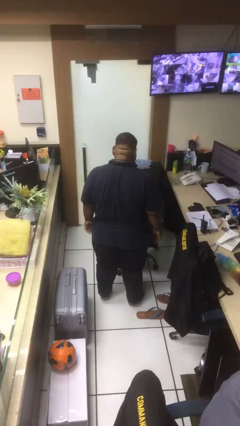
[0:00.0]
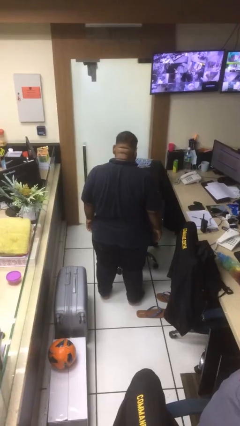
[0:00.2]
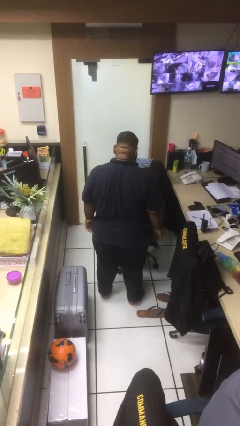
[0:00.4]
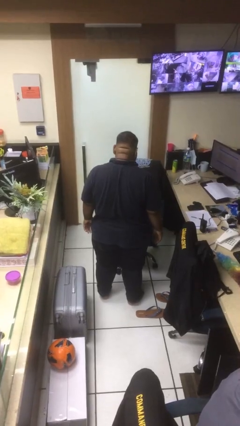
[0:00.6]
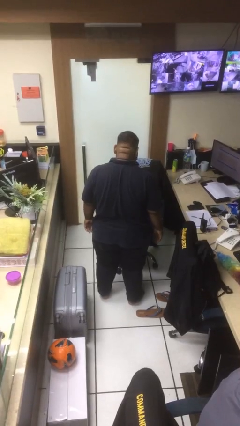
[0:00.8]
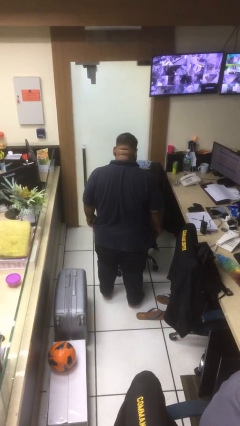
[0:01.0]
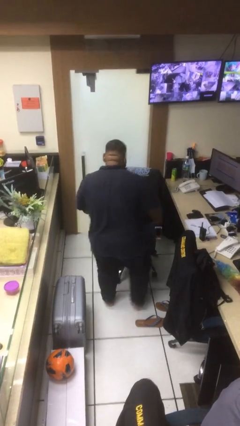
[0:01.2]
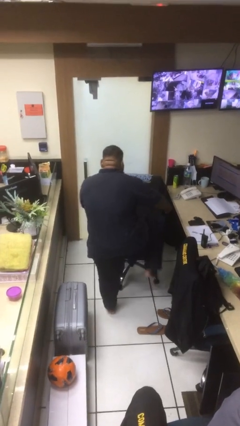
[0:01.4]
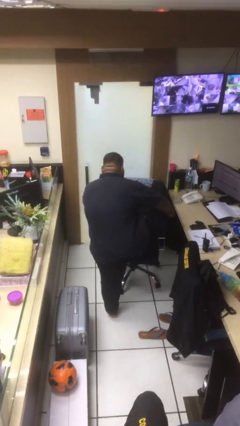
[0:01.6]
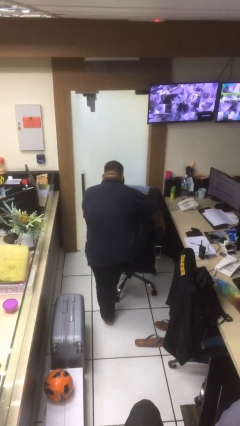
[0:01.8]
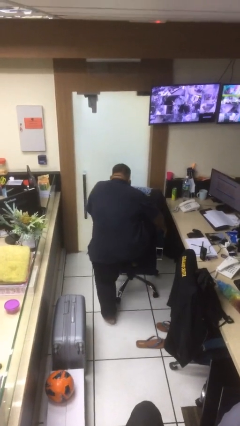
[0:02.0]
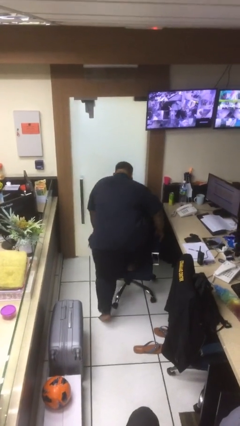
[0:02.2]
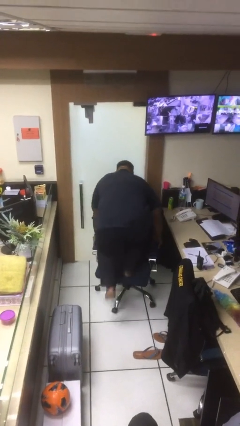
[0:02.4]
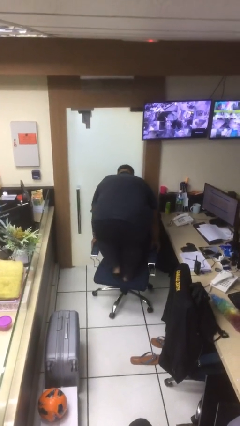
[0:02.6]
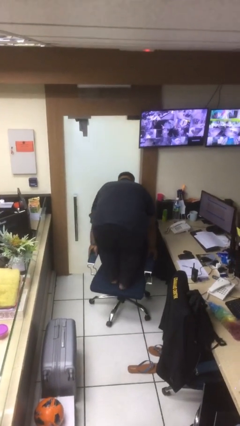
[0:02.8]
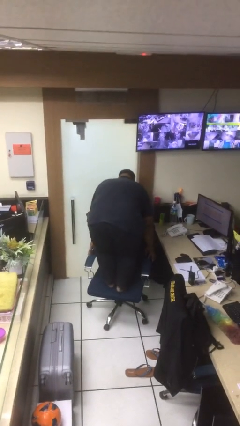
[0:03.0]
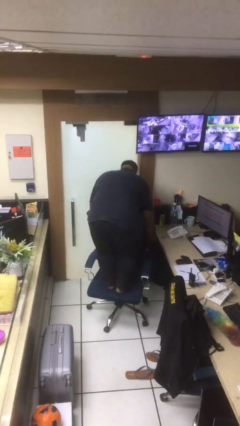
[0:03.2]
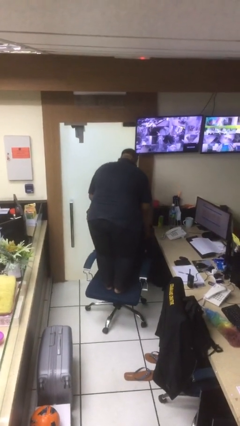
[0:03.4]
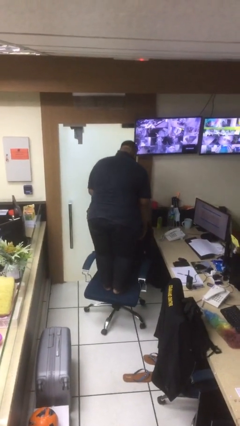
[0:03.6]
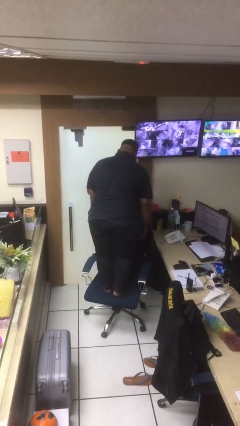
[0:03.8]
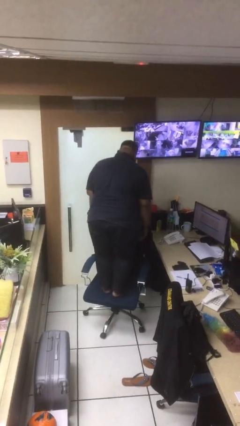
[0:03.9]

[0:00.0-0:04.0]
person climbs on chair

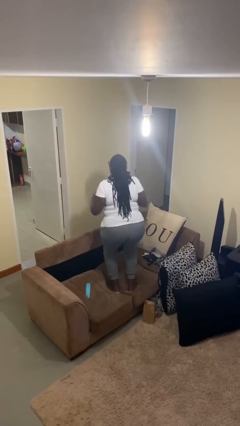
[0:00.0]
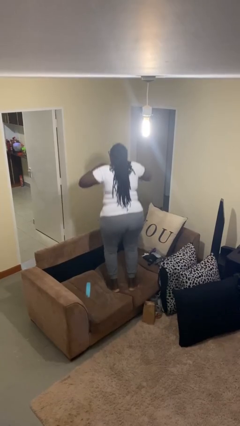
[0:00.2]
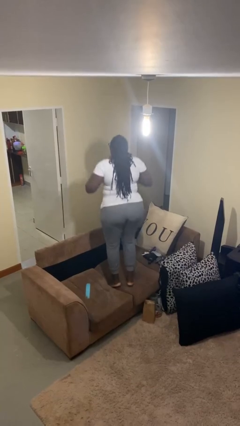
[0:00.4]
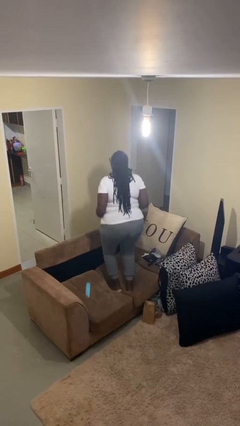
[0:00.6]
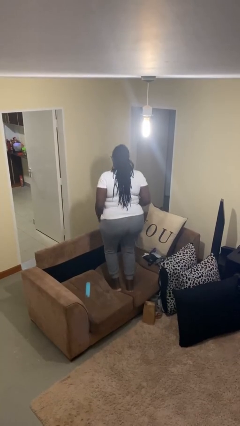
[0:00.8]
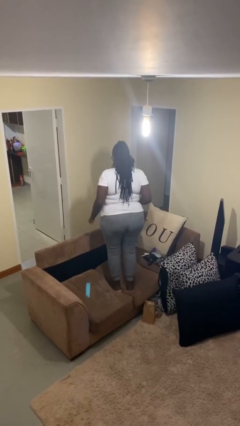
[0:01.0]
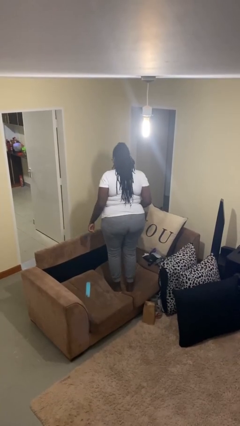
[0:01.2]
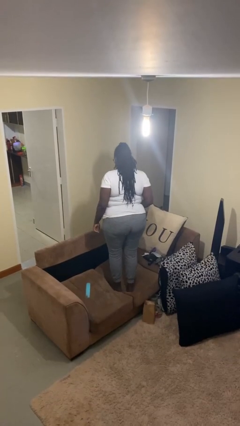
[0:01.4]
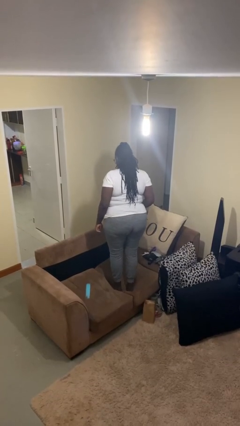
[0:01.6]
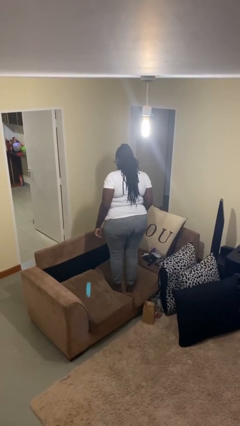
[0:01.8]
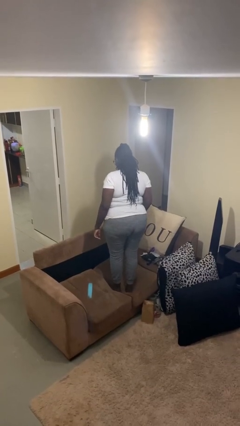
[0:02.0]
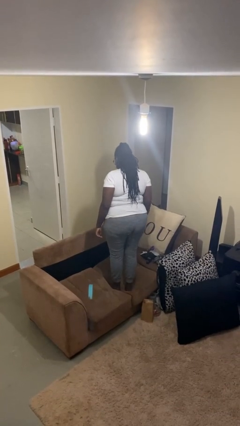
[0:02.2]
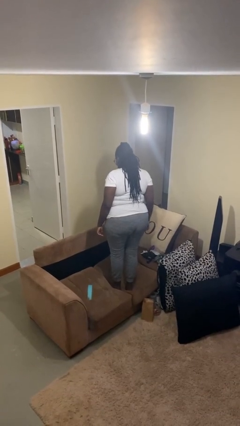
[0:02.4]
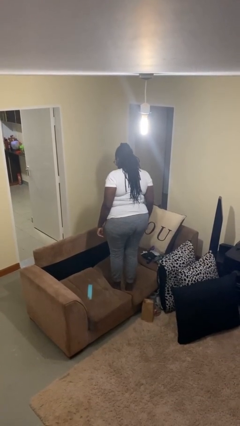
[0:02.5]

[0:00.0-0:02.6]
person jumps on couch

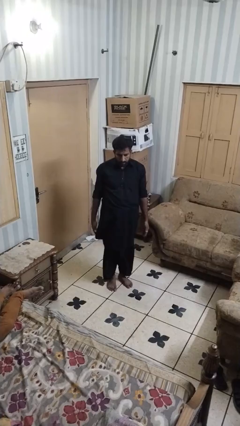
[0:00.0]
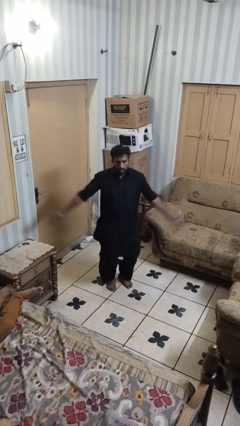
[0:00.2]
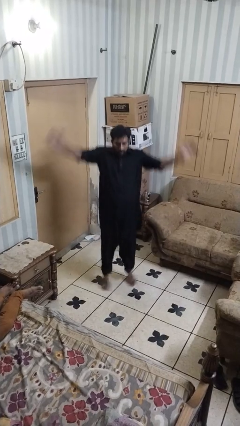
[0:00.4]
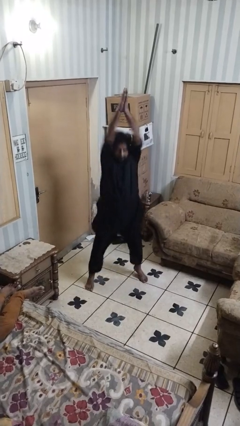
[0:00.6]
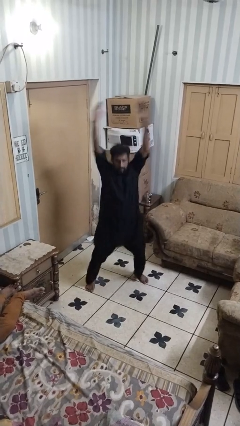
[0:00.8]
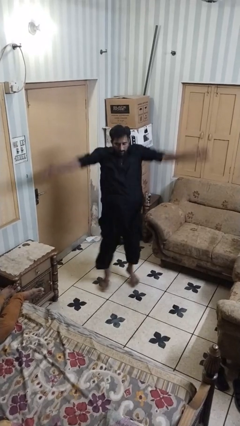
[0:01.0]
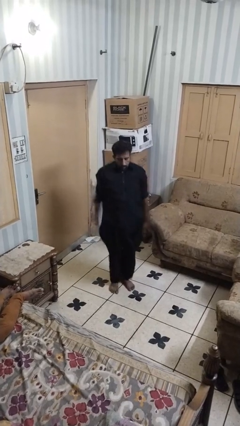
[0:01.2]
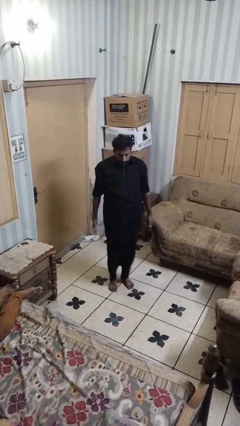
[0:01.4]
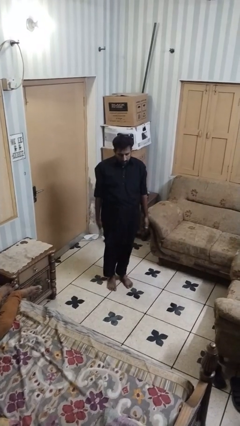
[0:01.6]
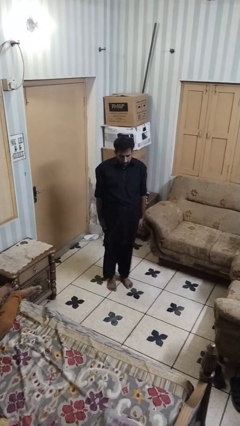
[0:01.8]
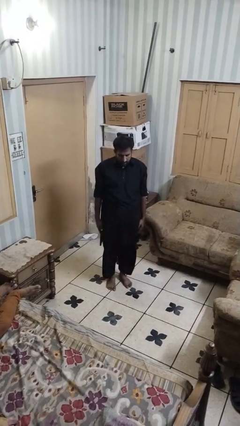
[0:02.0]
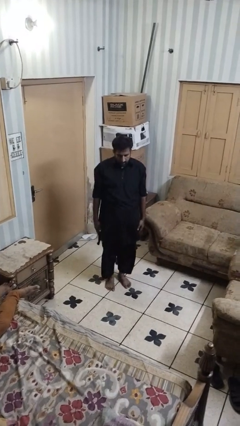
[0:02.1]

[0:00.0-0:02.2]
person exercises with jumping jacks

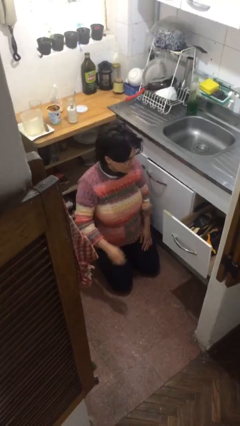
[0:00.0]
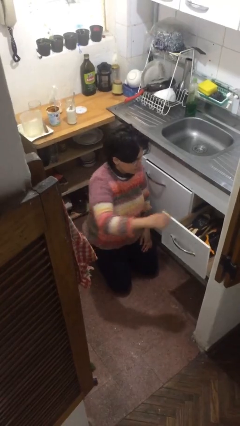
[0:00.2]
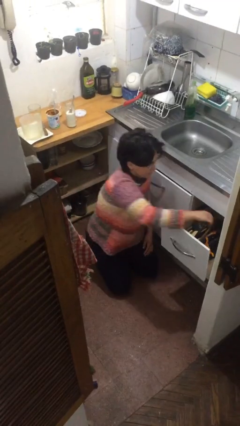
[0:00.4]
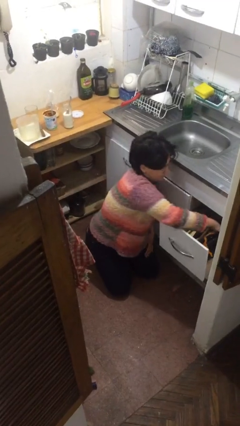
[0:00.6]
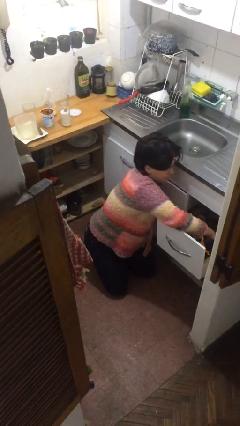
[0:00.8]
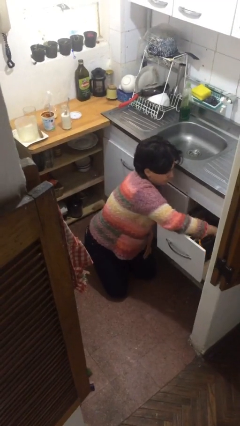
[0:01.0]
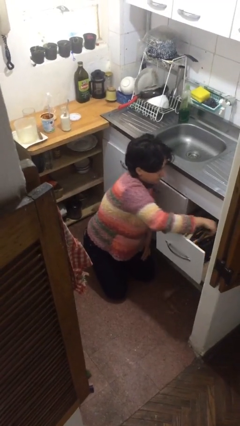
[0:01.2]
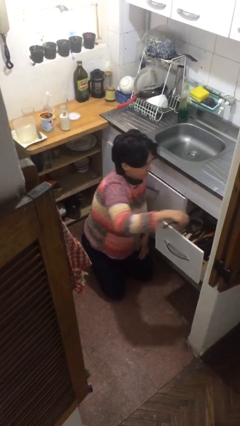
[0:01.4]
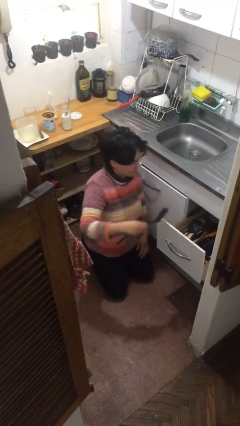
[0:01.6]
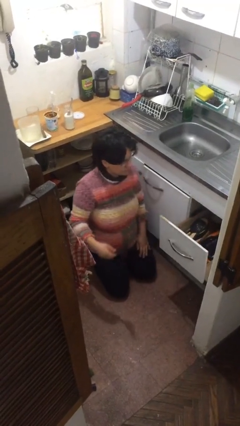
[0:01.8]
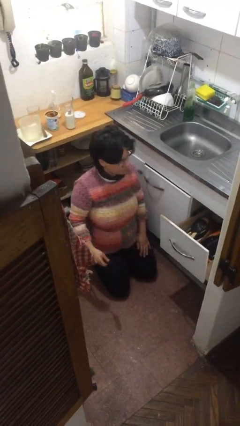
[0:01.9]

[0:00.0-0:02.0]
person takes object from kitchen drawer

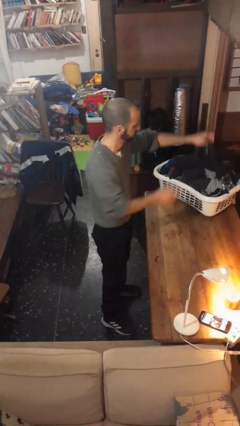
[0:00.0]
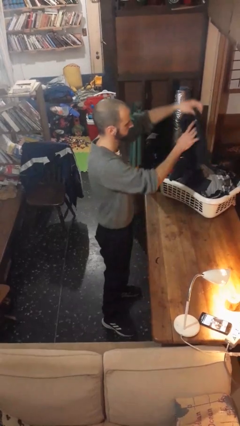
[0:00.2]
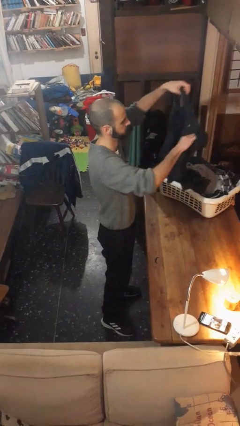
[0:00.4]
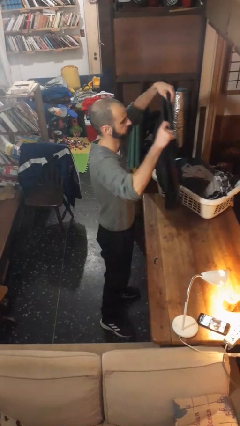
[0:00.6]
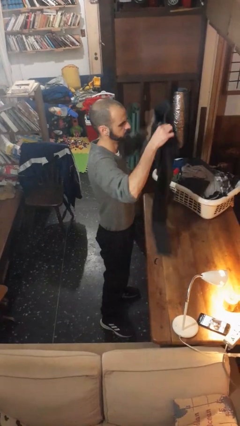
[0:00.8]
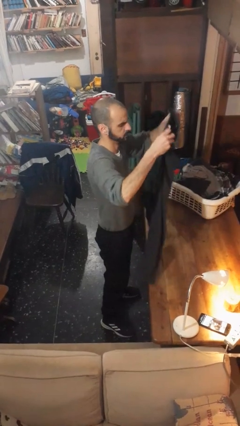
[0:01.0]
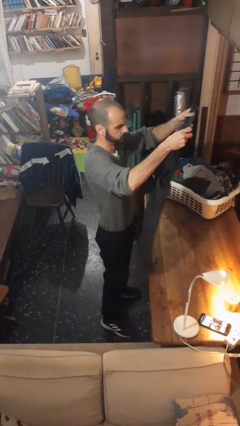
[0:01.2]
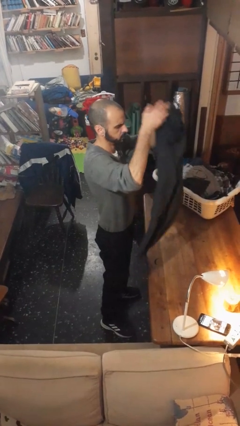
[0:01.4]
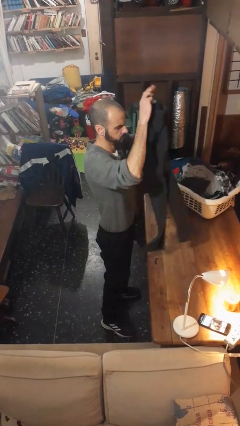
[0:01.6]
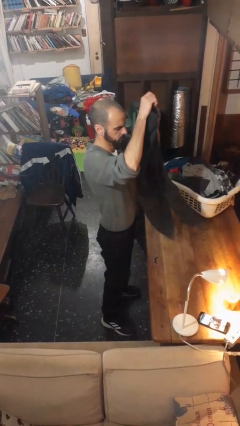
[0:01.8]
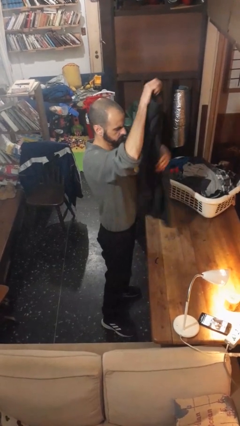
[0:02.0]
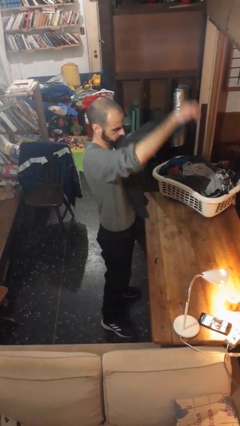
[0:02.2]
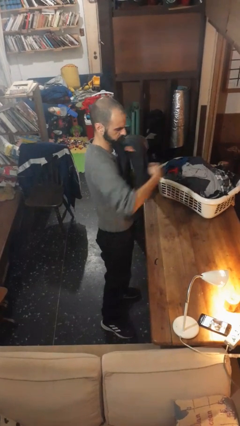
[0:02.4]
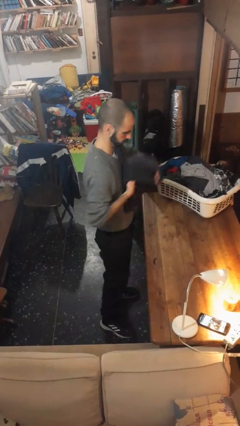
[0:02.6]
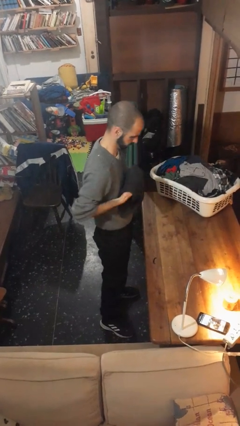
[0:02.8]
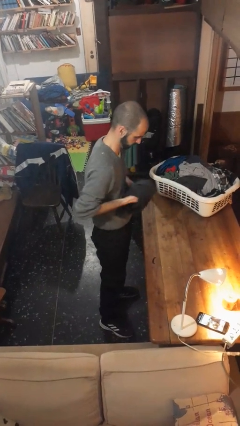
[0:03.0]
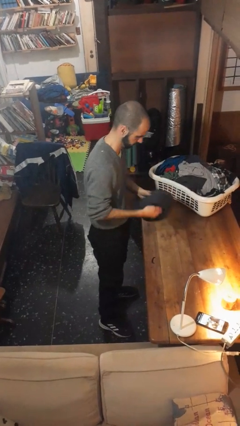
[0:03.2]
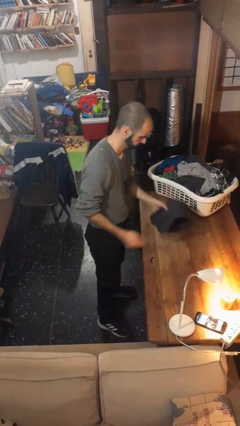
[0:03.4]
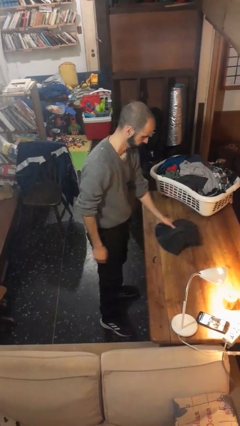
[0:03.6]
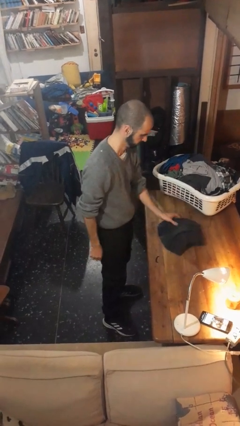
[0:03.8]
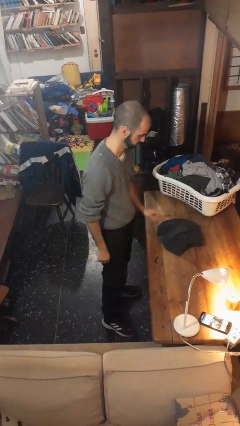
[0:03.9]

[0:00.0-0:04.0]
person folds pants

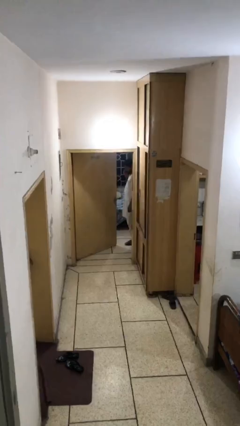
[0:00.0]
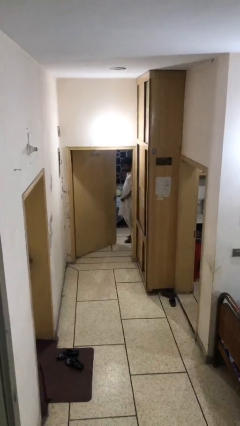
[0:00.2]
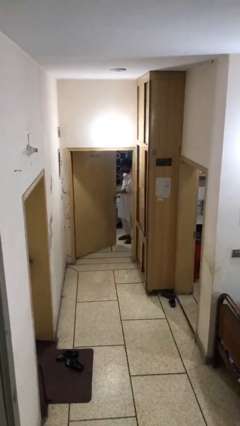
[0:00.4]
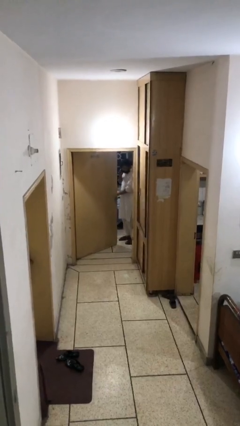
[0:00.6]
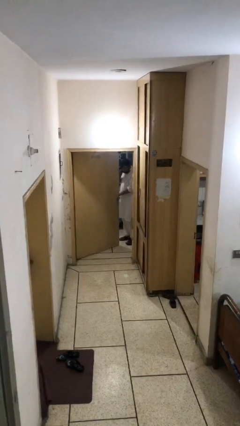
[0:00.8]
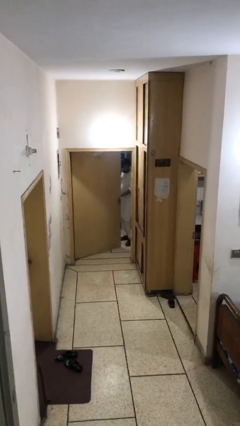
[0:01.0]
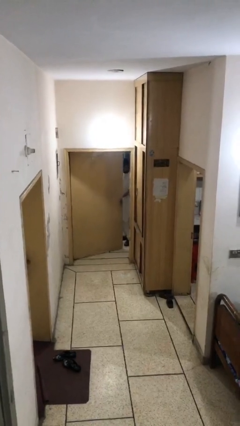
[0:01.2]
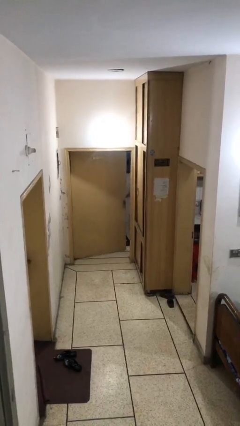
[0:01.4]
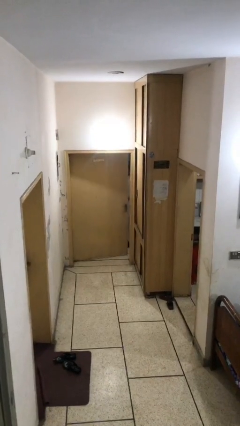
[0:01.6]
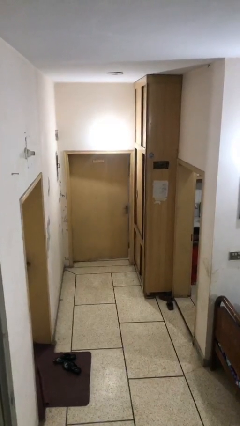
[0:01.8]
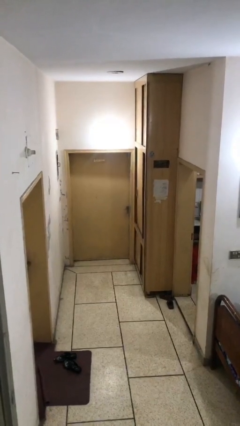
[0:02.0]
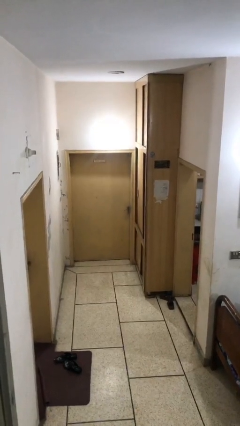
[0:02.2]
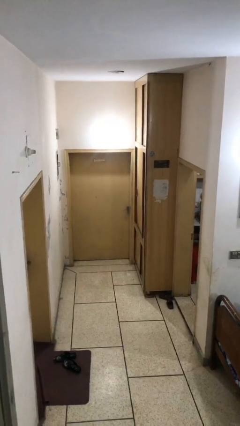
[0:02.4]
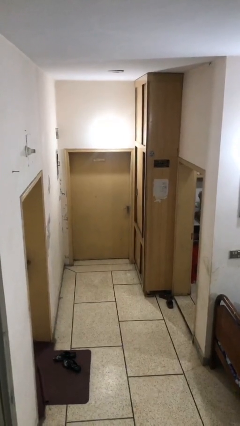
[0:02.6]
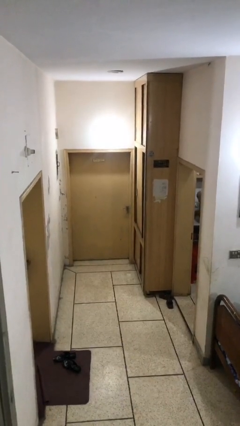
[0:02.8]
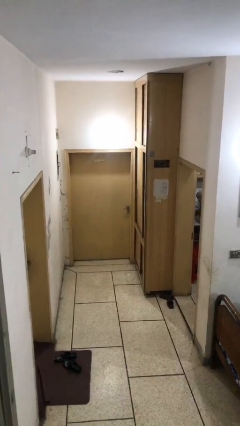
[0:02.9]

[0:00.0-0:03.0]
person closes facility door
